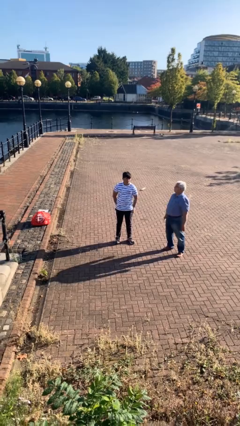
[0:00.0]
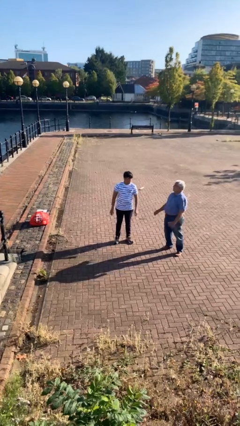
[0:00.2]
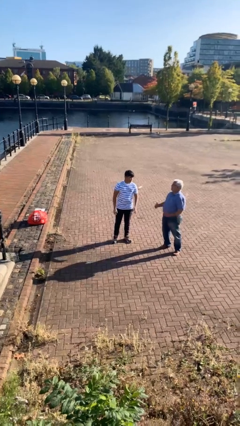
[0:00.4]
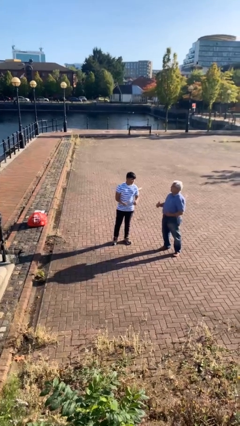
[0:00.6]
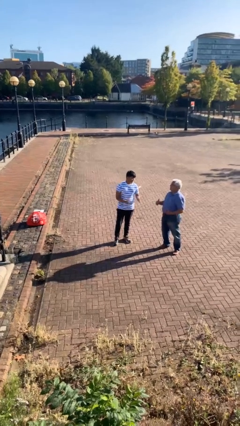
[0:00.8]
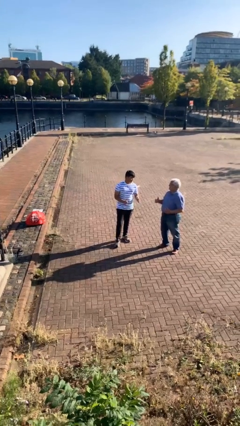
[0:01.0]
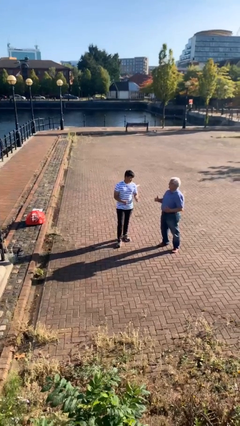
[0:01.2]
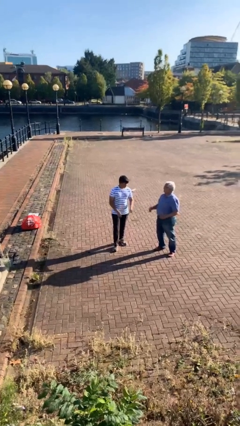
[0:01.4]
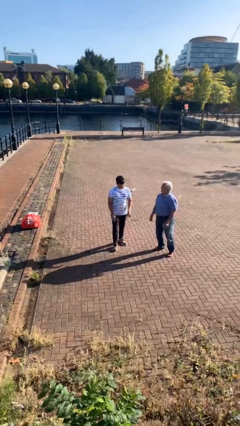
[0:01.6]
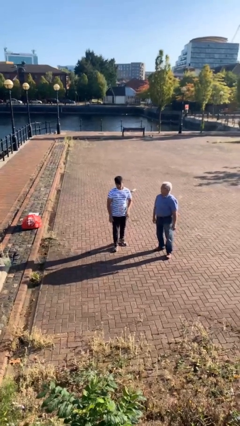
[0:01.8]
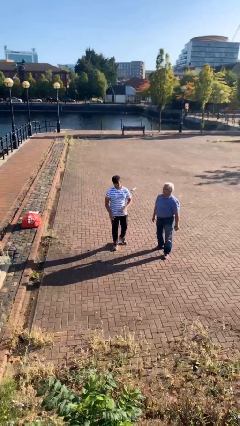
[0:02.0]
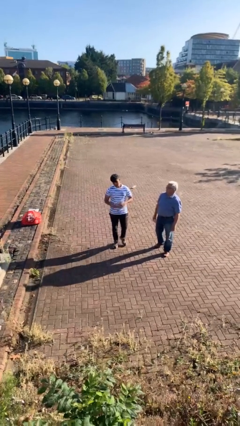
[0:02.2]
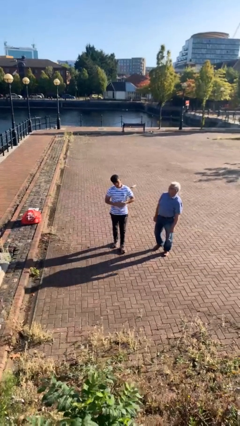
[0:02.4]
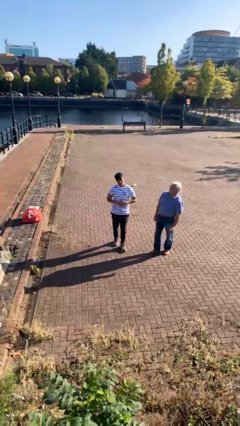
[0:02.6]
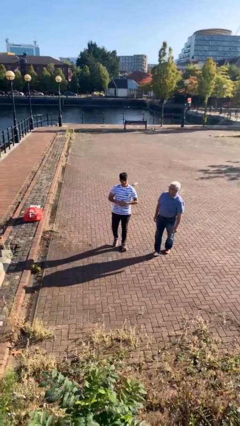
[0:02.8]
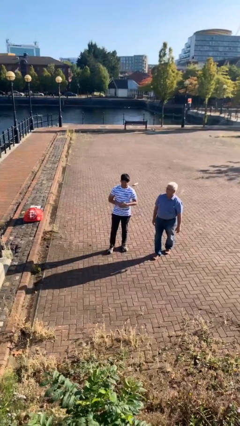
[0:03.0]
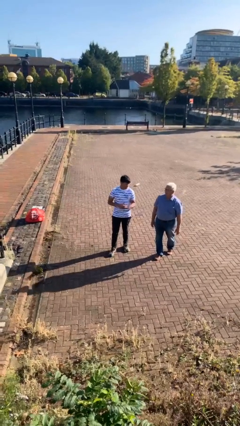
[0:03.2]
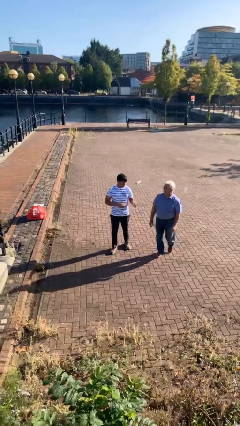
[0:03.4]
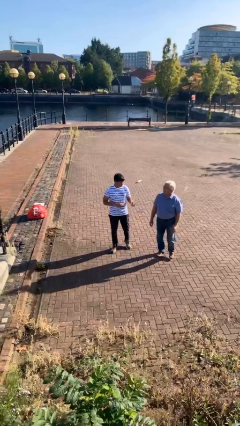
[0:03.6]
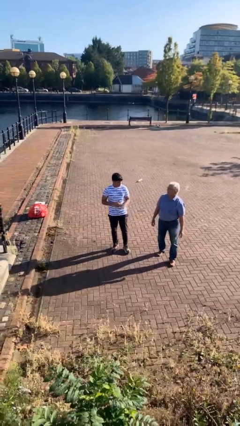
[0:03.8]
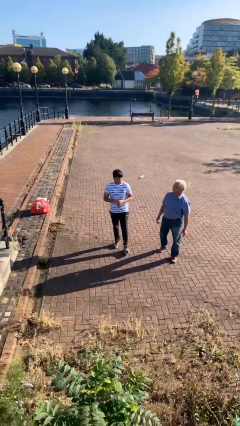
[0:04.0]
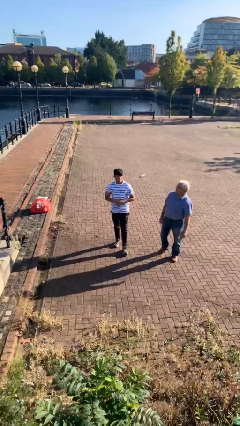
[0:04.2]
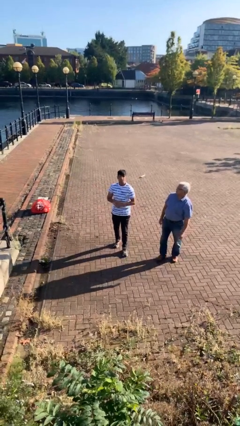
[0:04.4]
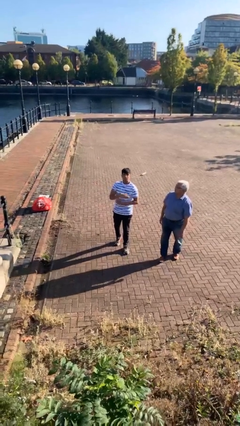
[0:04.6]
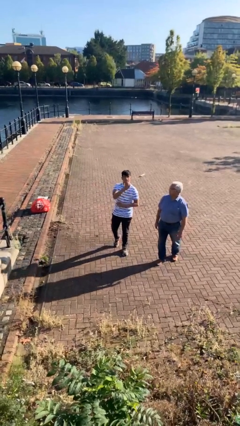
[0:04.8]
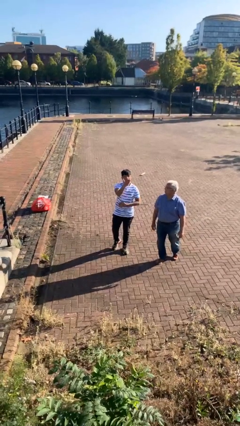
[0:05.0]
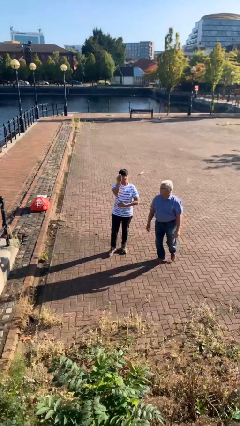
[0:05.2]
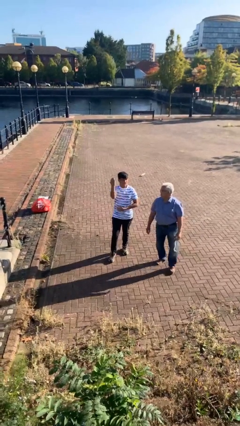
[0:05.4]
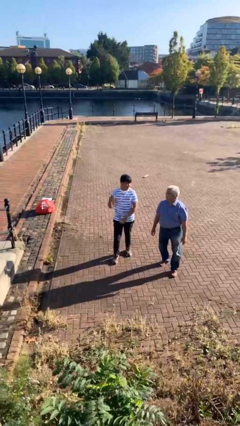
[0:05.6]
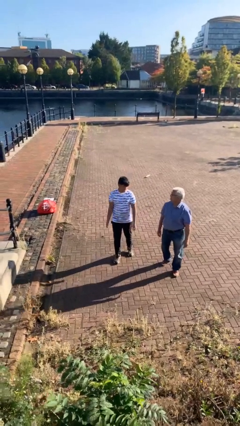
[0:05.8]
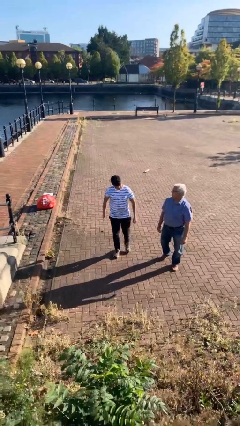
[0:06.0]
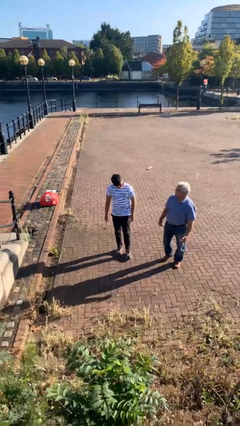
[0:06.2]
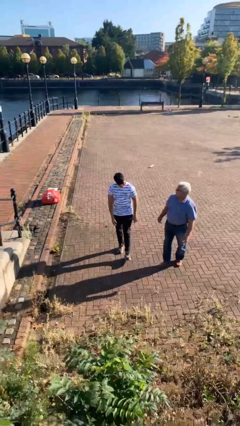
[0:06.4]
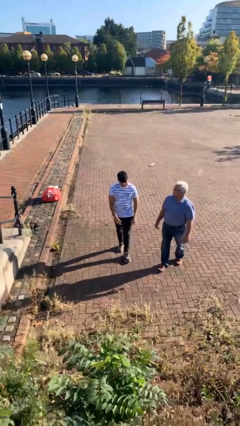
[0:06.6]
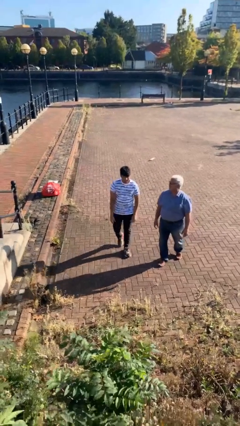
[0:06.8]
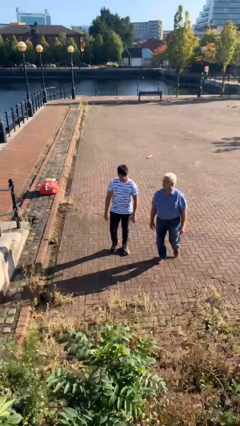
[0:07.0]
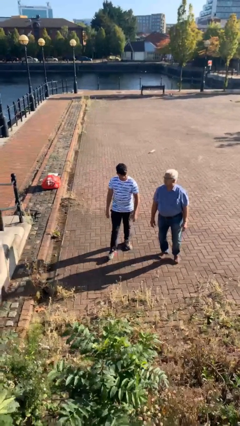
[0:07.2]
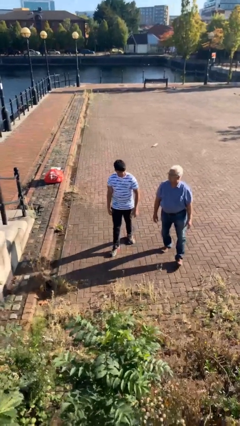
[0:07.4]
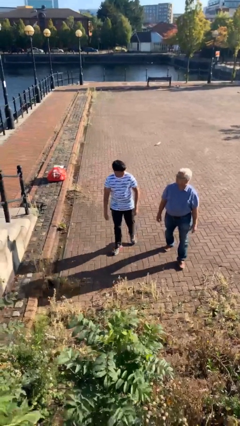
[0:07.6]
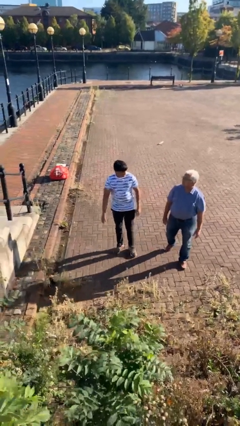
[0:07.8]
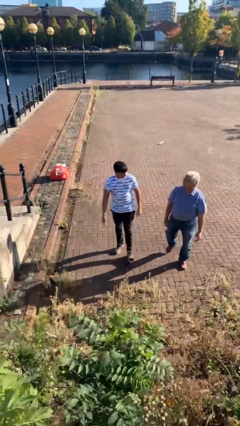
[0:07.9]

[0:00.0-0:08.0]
person talks to person

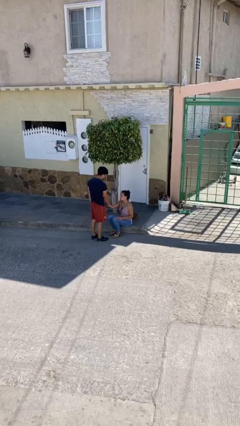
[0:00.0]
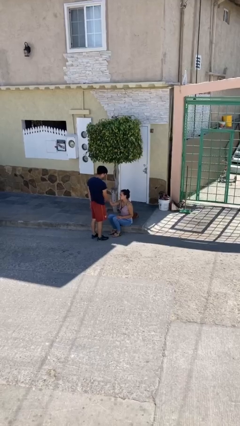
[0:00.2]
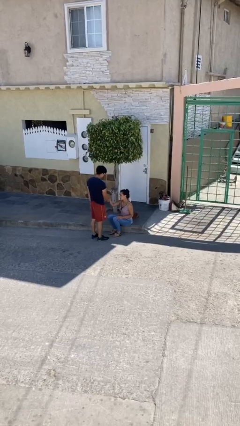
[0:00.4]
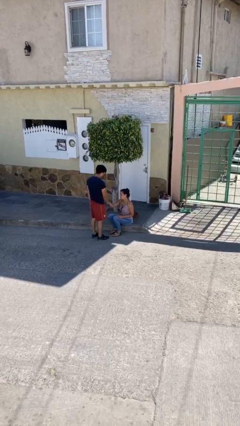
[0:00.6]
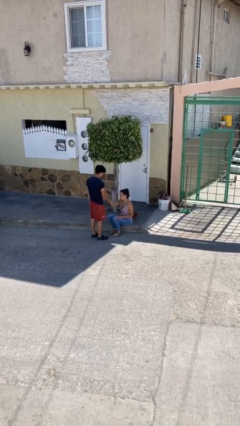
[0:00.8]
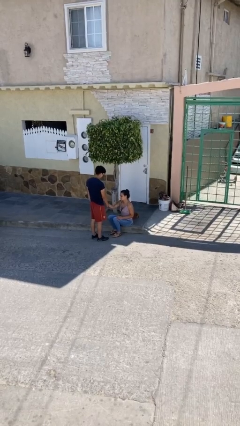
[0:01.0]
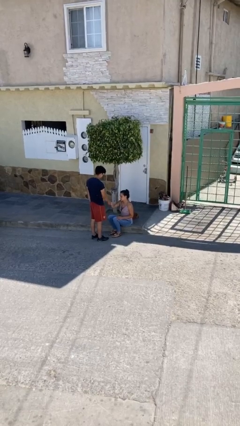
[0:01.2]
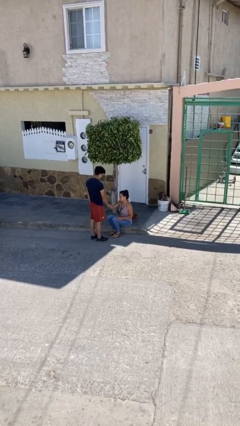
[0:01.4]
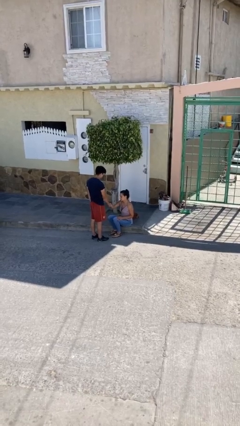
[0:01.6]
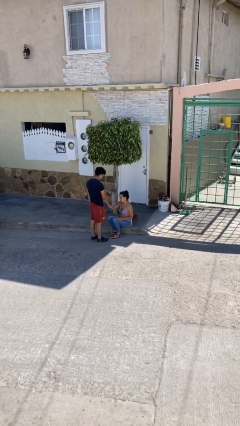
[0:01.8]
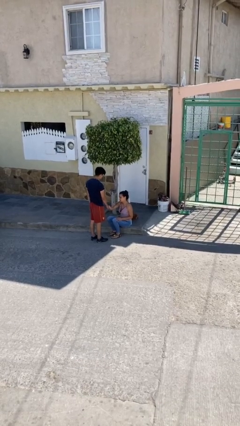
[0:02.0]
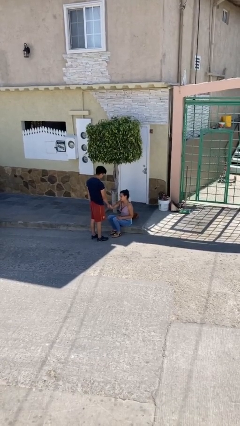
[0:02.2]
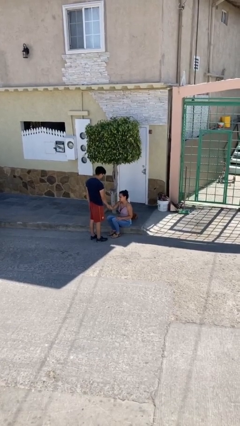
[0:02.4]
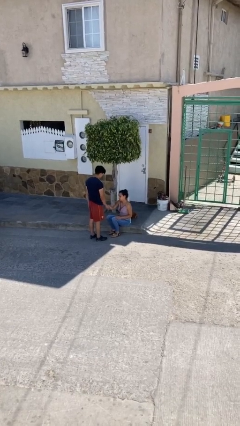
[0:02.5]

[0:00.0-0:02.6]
person shakes hand

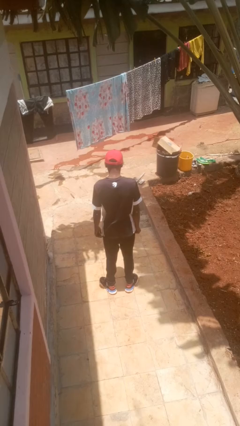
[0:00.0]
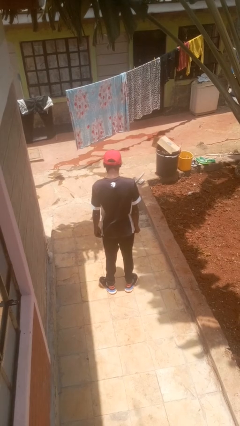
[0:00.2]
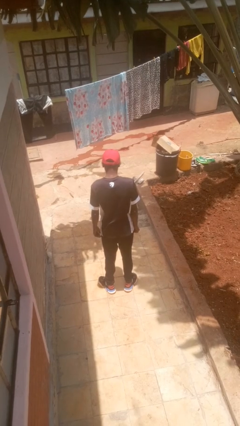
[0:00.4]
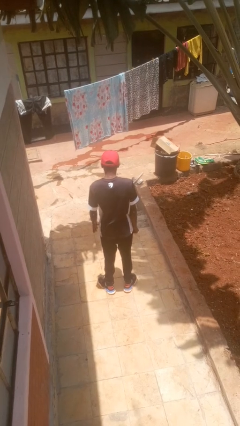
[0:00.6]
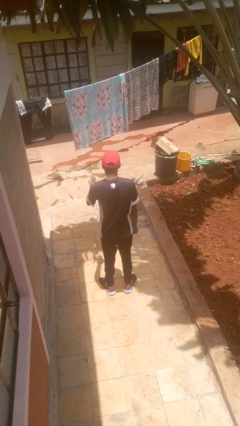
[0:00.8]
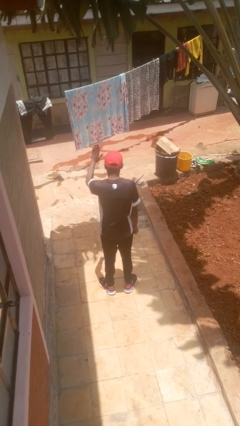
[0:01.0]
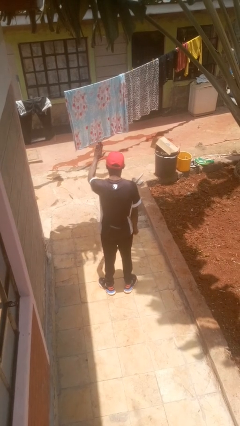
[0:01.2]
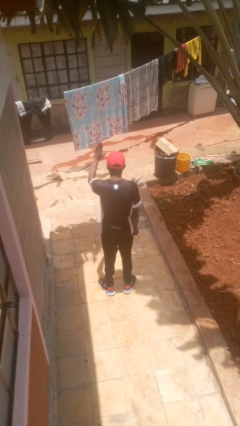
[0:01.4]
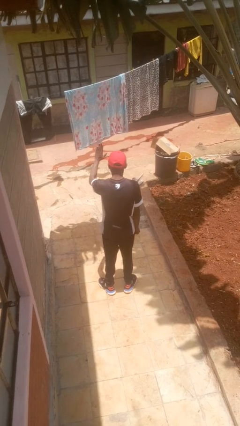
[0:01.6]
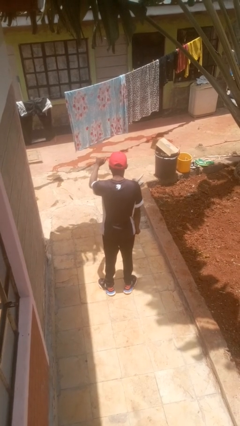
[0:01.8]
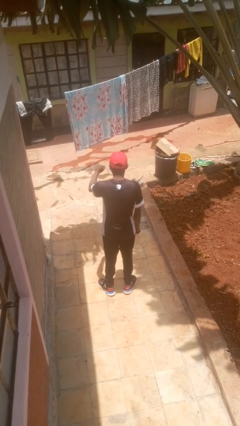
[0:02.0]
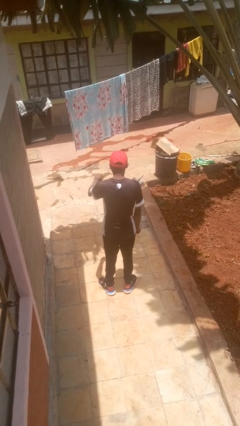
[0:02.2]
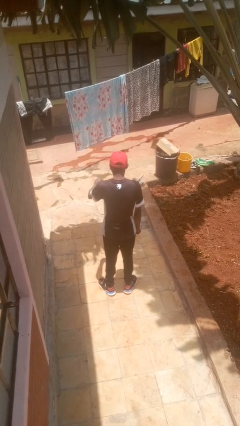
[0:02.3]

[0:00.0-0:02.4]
person gestures stop

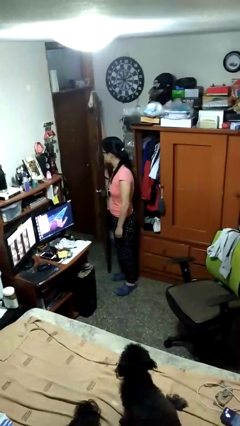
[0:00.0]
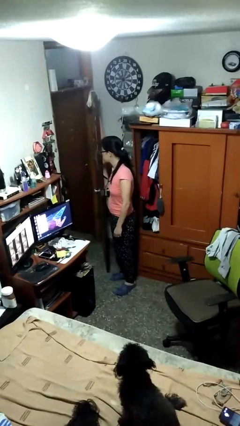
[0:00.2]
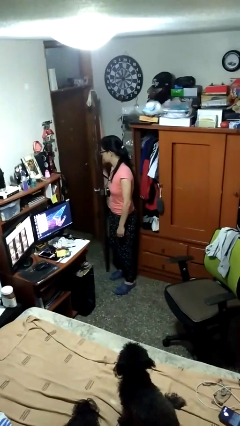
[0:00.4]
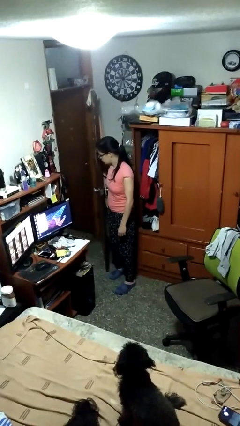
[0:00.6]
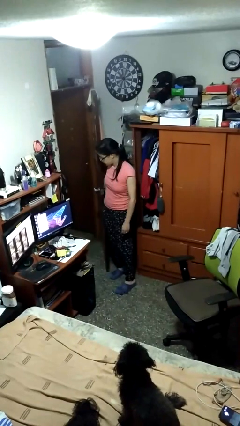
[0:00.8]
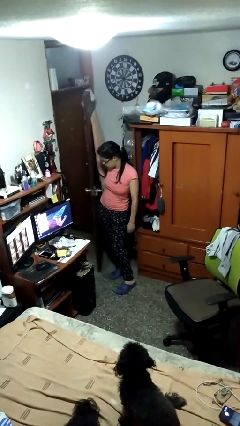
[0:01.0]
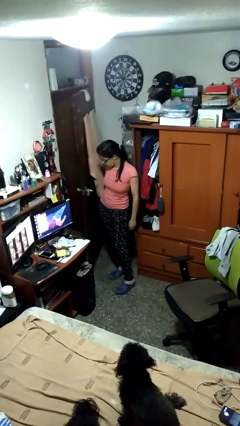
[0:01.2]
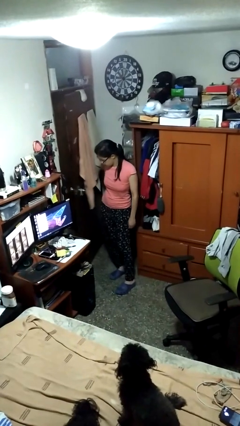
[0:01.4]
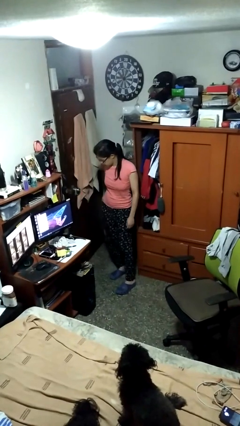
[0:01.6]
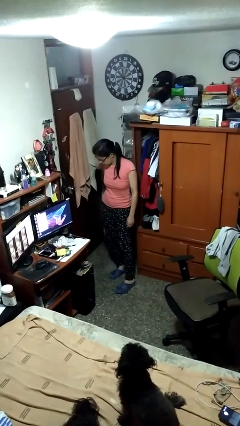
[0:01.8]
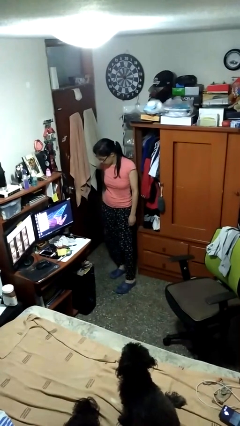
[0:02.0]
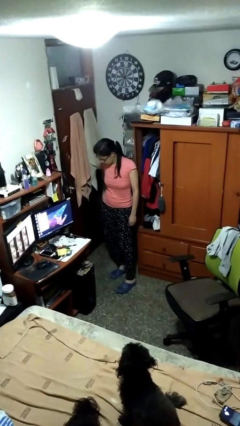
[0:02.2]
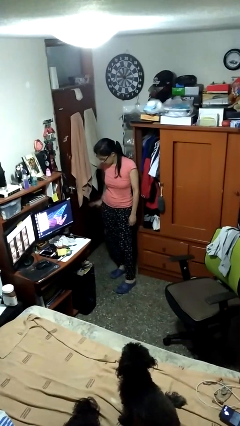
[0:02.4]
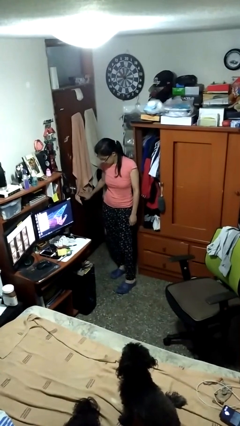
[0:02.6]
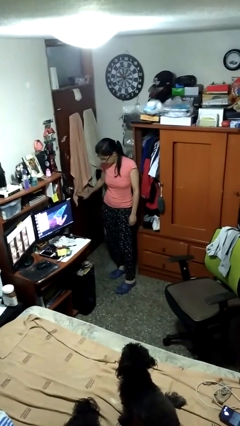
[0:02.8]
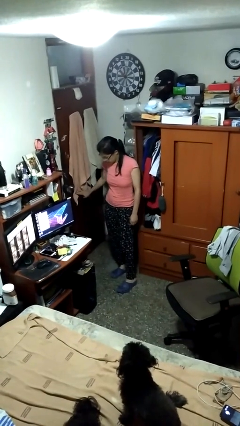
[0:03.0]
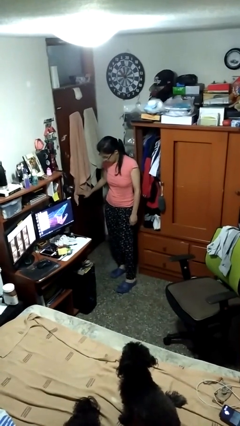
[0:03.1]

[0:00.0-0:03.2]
person closes door with hip

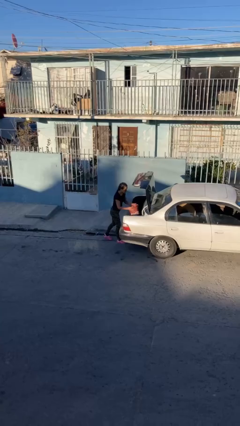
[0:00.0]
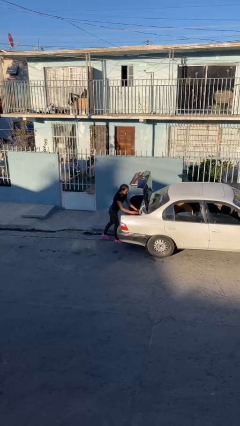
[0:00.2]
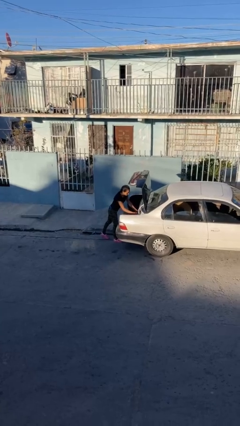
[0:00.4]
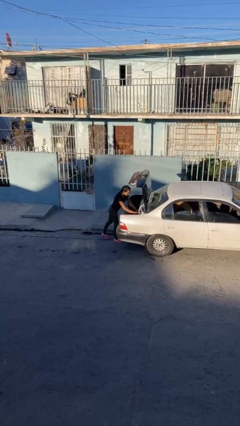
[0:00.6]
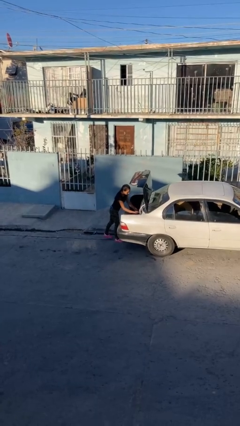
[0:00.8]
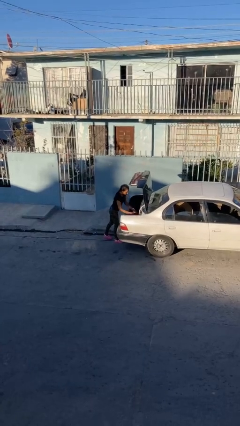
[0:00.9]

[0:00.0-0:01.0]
person loads car
